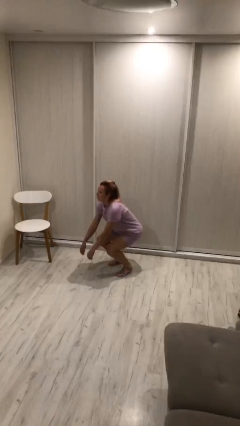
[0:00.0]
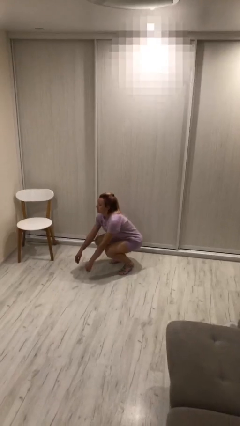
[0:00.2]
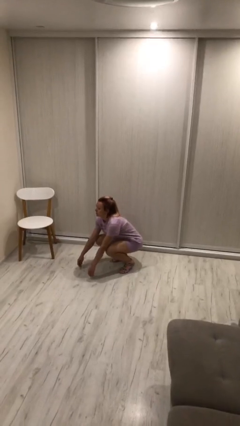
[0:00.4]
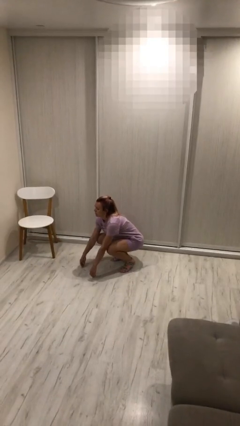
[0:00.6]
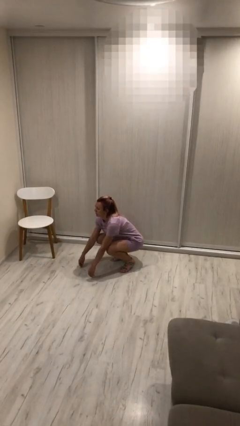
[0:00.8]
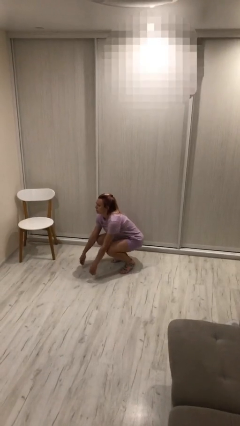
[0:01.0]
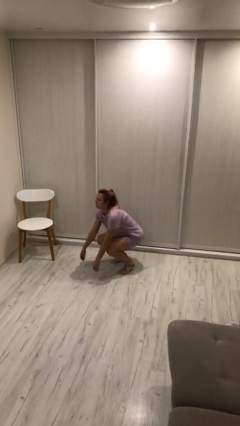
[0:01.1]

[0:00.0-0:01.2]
person squats

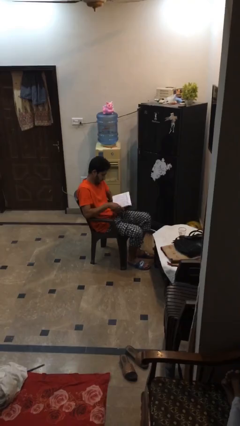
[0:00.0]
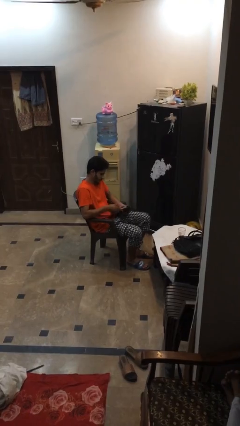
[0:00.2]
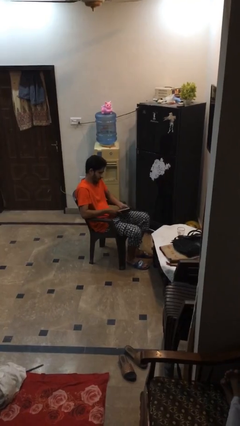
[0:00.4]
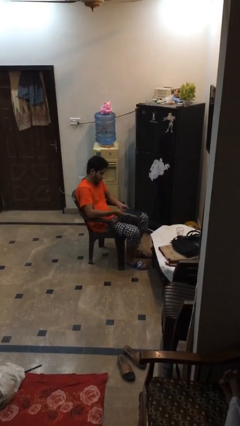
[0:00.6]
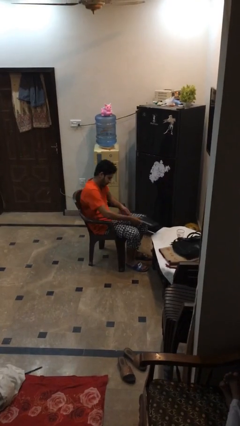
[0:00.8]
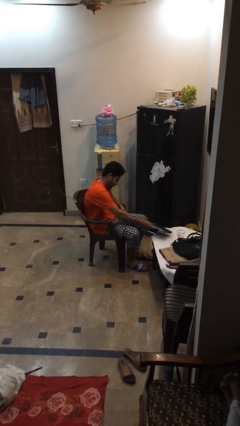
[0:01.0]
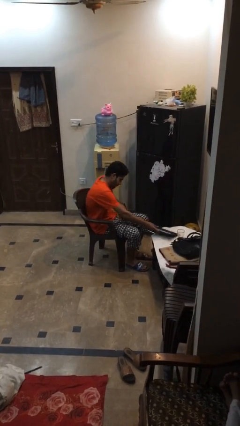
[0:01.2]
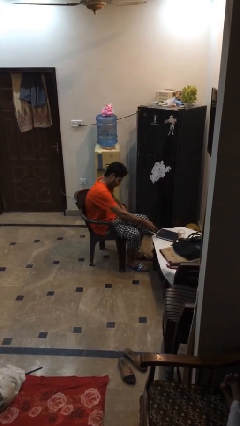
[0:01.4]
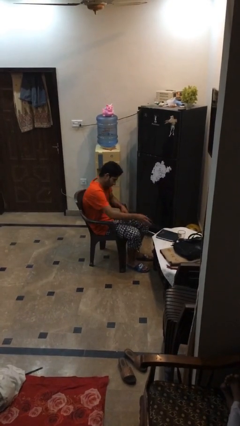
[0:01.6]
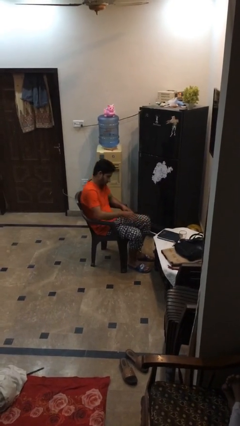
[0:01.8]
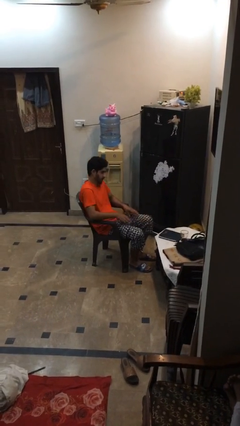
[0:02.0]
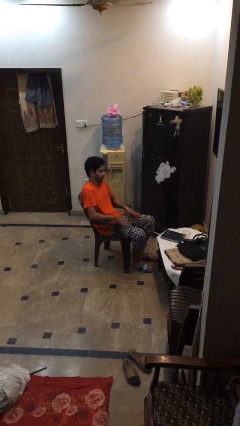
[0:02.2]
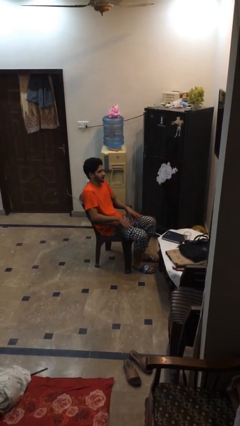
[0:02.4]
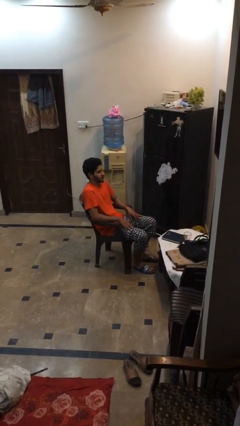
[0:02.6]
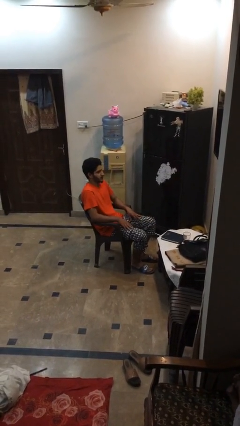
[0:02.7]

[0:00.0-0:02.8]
person puts down object on table

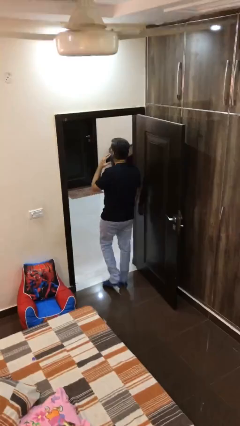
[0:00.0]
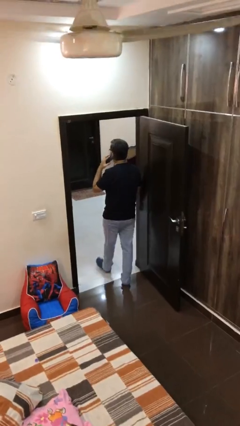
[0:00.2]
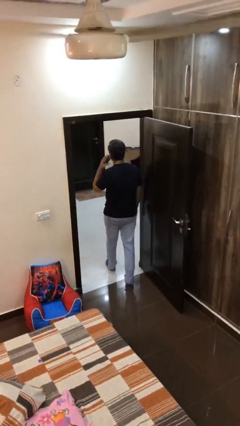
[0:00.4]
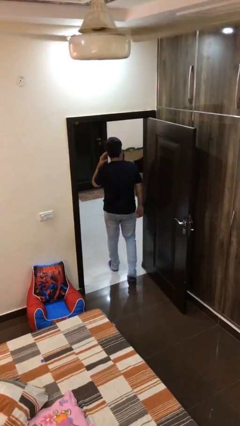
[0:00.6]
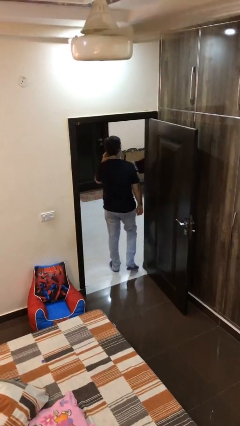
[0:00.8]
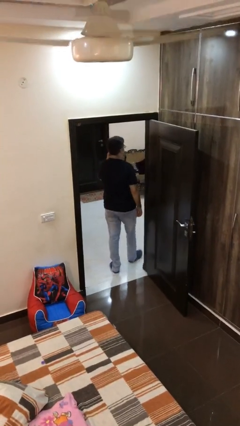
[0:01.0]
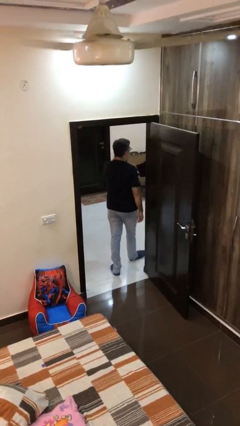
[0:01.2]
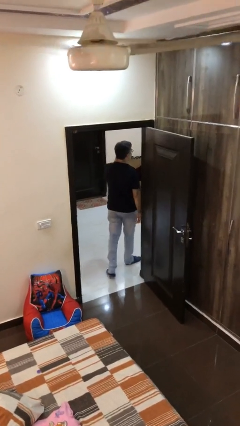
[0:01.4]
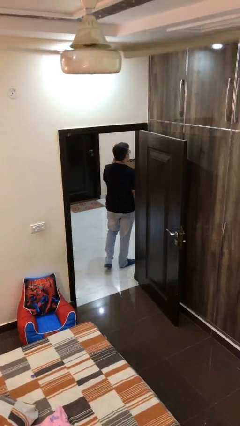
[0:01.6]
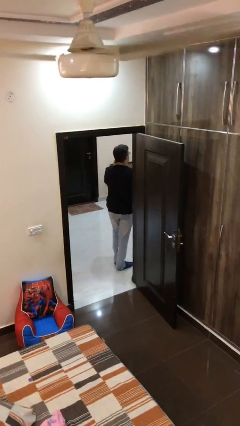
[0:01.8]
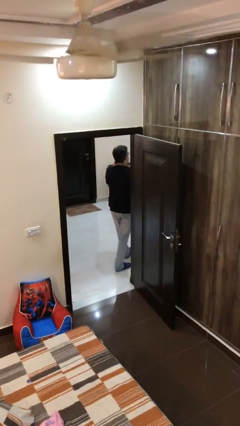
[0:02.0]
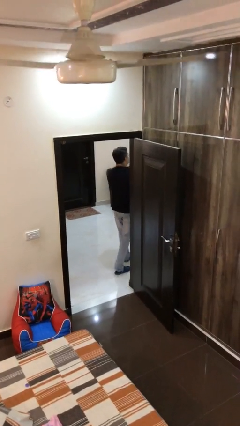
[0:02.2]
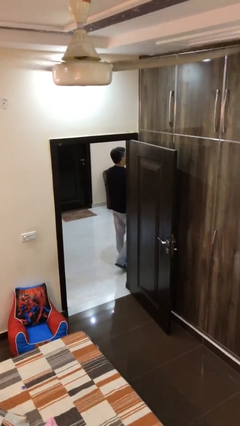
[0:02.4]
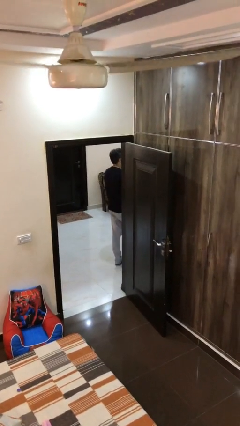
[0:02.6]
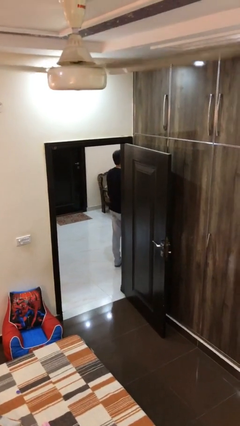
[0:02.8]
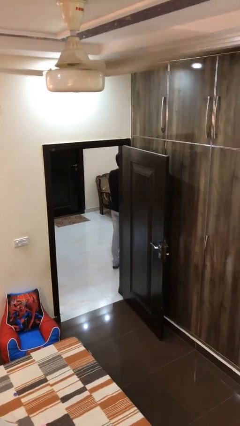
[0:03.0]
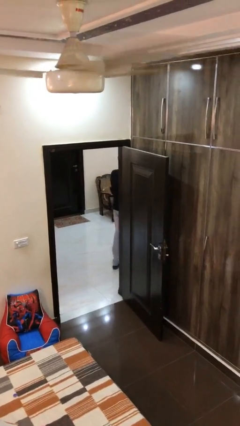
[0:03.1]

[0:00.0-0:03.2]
person exits scene through structure

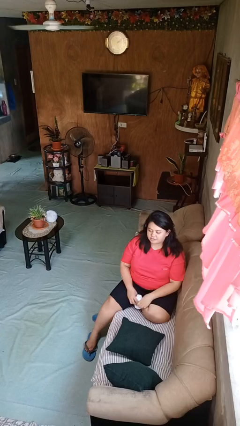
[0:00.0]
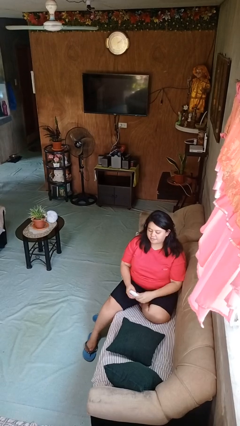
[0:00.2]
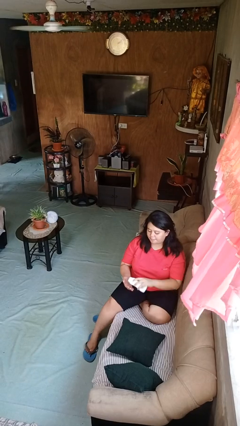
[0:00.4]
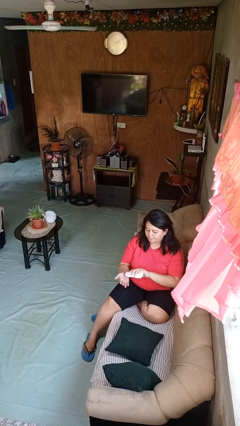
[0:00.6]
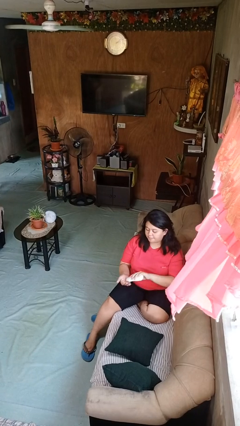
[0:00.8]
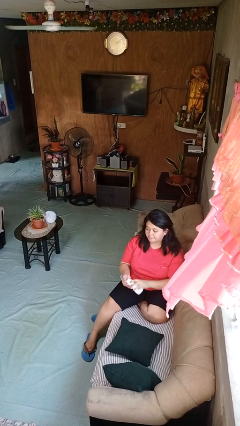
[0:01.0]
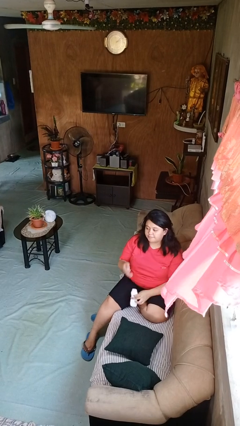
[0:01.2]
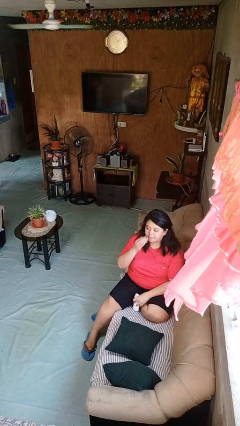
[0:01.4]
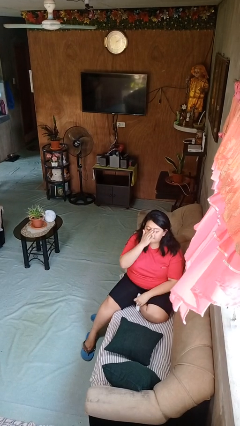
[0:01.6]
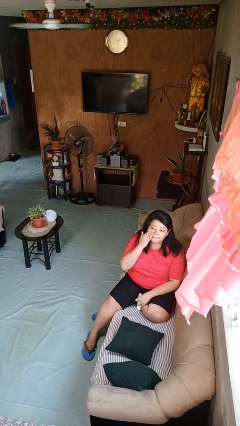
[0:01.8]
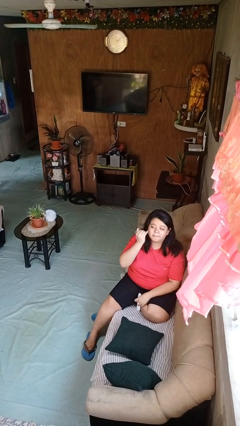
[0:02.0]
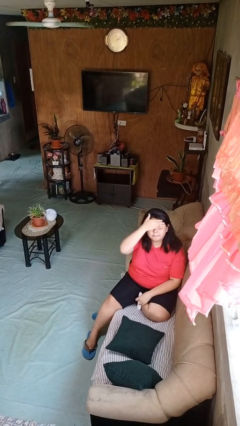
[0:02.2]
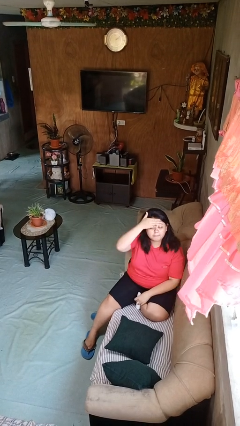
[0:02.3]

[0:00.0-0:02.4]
person applies facial moisturizer

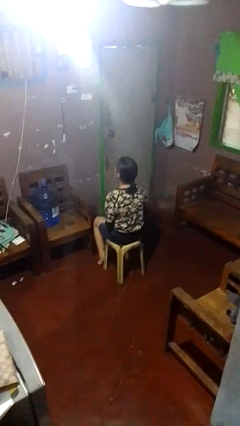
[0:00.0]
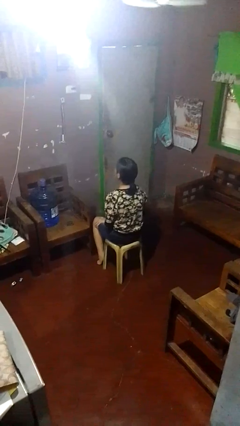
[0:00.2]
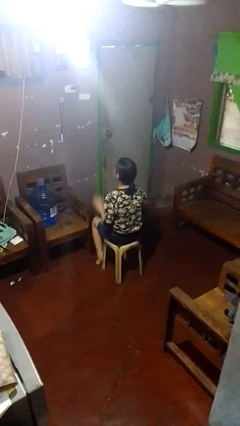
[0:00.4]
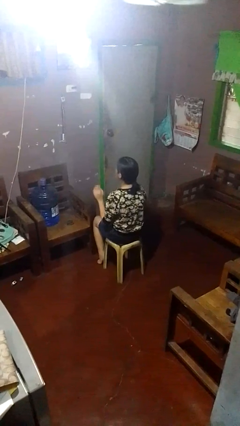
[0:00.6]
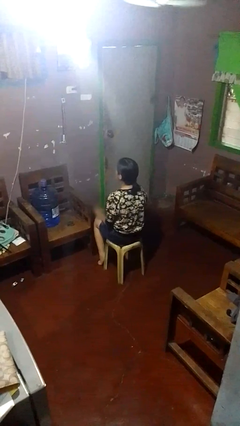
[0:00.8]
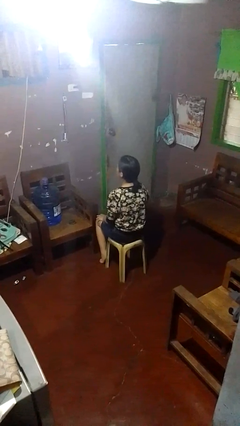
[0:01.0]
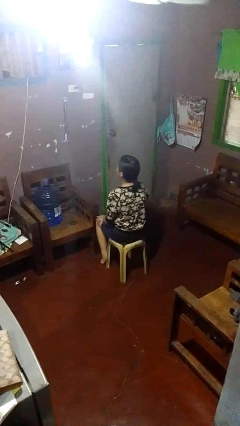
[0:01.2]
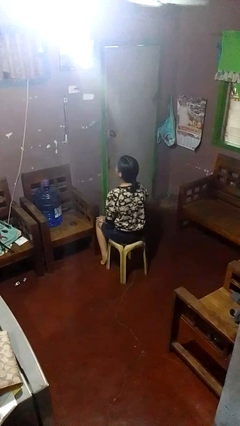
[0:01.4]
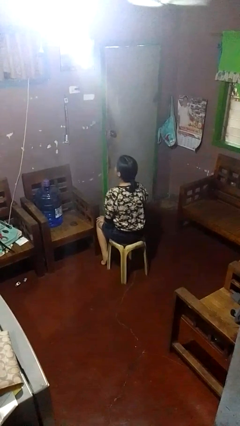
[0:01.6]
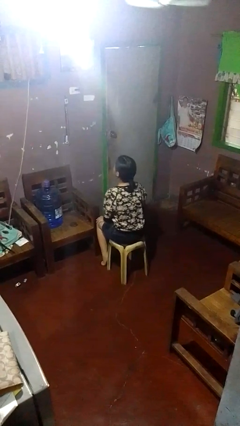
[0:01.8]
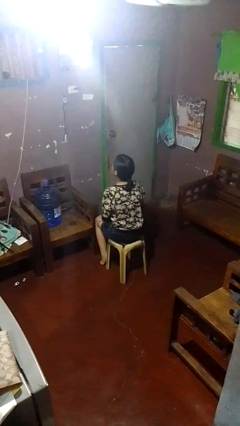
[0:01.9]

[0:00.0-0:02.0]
person slaps hands on thighs

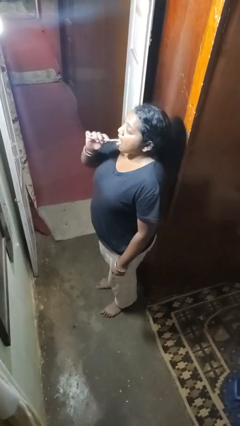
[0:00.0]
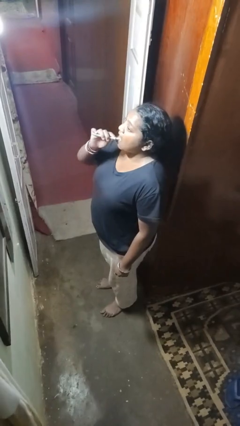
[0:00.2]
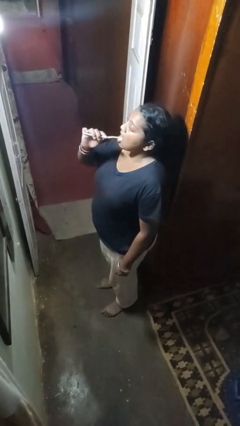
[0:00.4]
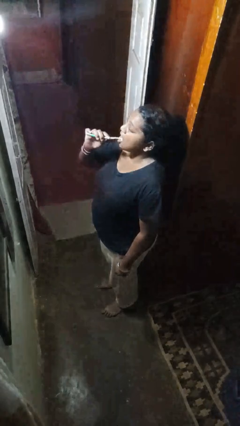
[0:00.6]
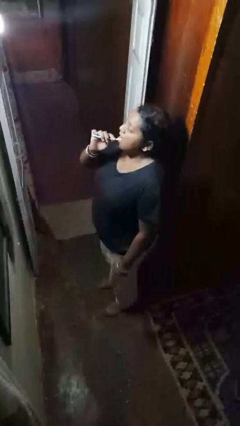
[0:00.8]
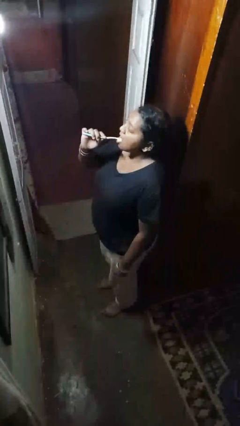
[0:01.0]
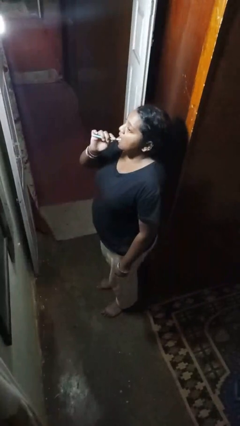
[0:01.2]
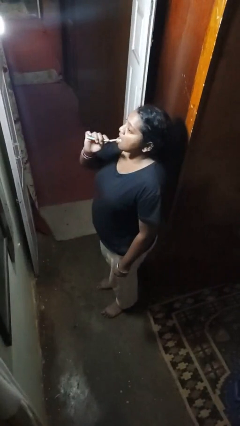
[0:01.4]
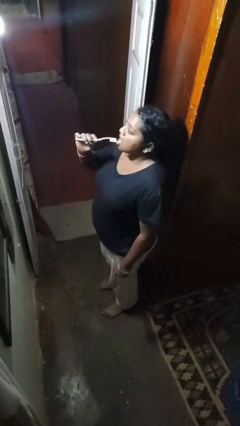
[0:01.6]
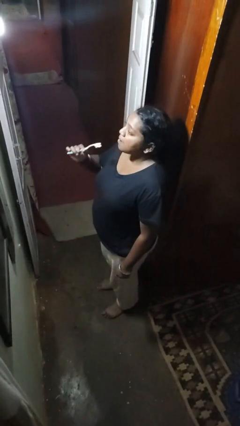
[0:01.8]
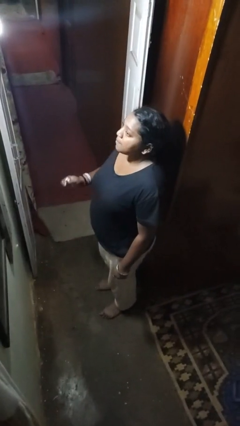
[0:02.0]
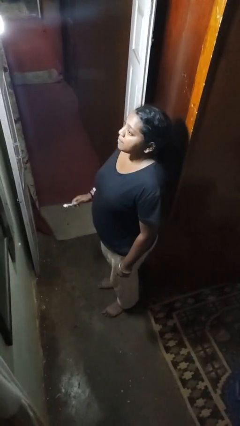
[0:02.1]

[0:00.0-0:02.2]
person brushes teeth

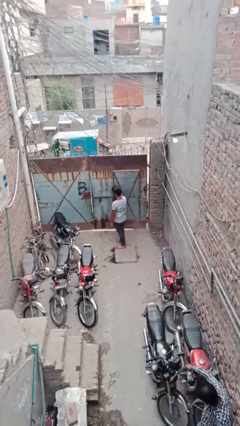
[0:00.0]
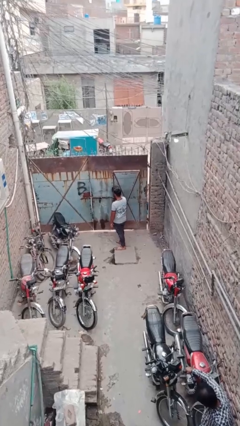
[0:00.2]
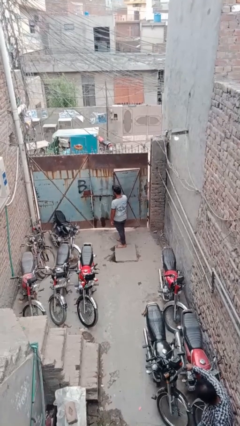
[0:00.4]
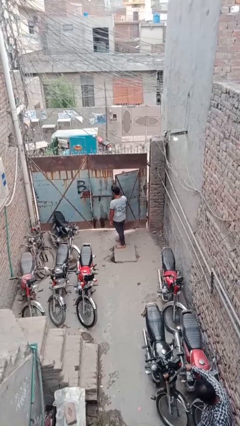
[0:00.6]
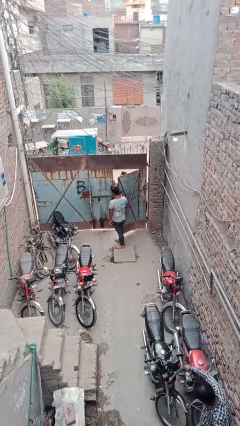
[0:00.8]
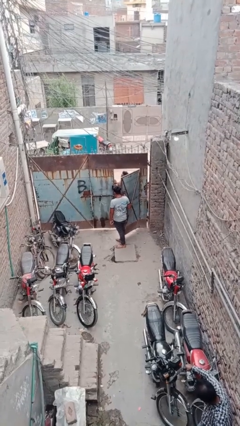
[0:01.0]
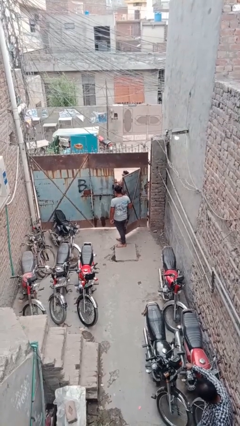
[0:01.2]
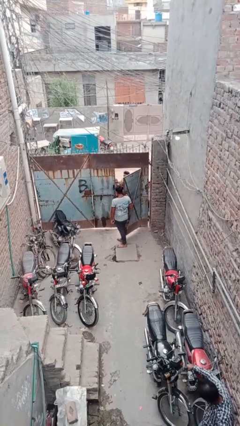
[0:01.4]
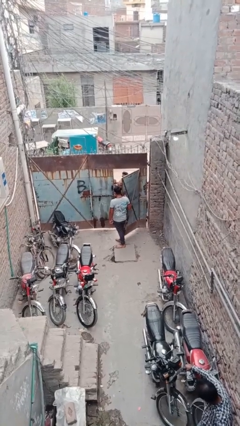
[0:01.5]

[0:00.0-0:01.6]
person opens facility door

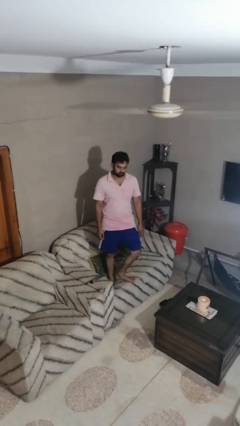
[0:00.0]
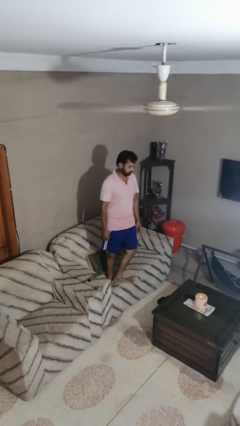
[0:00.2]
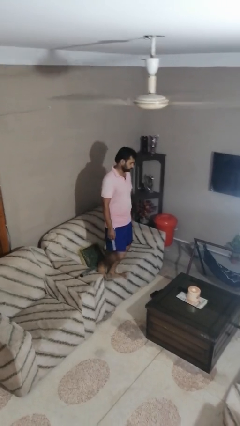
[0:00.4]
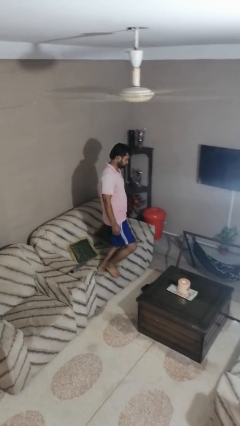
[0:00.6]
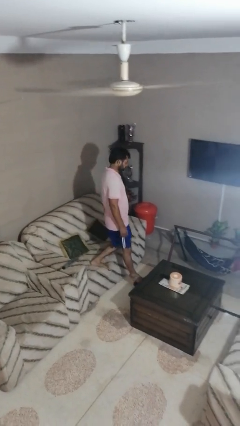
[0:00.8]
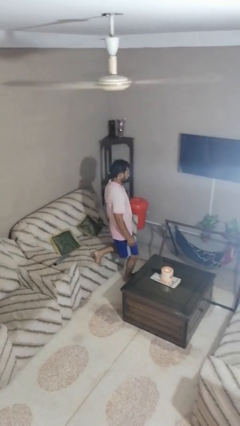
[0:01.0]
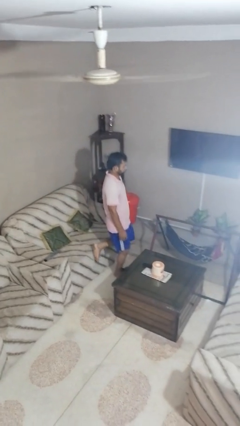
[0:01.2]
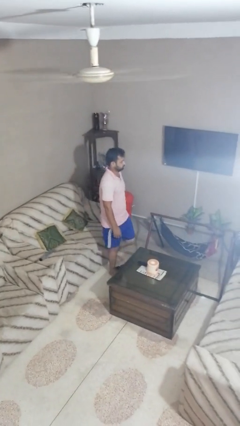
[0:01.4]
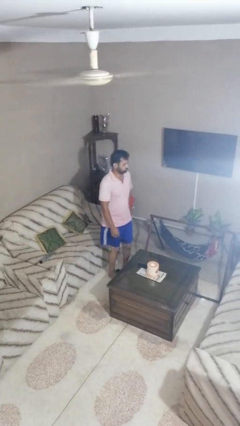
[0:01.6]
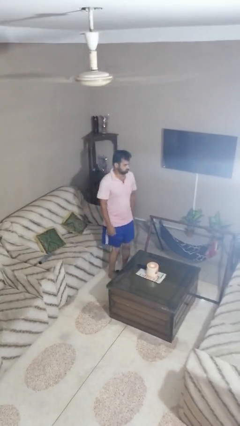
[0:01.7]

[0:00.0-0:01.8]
person climbs off couch
